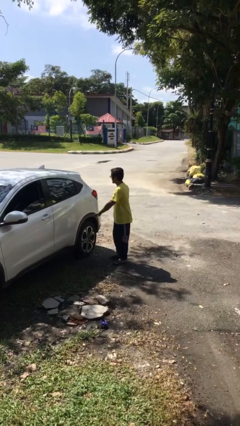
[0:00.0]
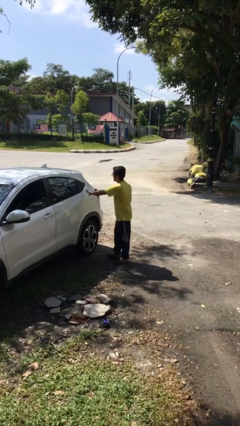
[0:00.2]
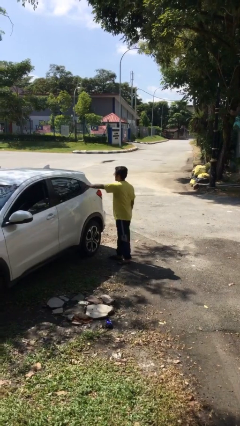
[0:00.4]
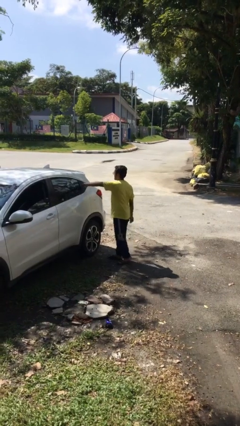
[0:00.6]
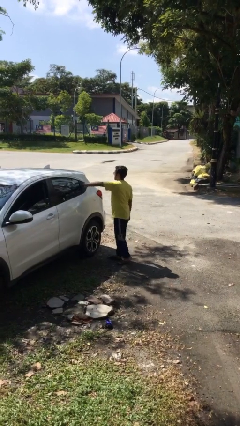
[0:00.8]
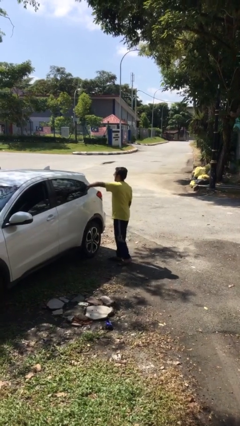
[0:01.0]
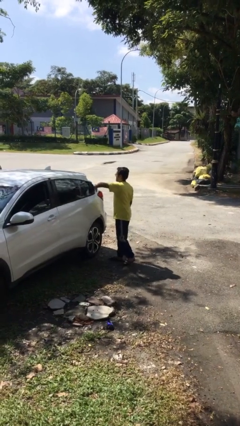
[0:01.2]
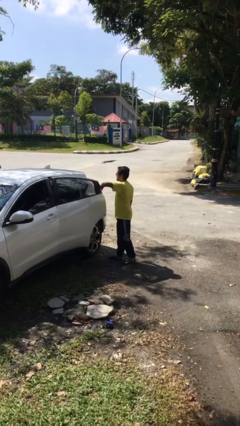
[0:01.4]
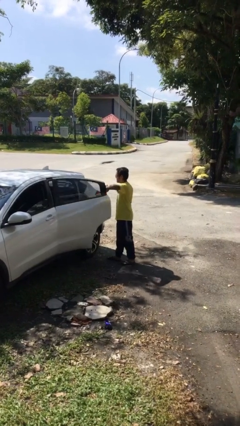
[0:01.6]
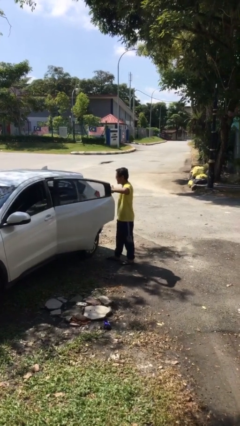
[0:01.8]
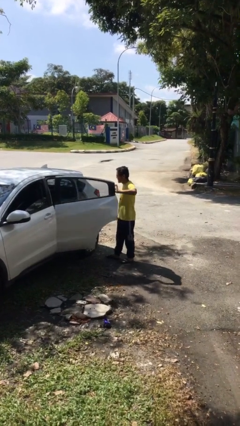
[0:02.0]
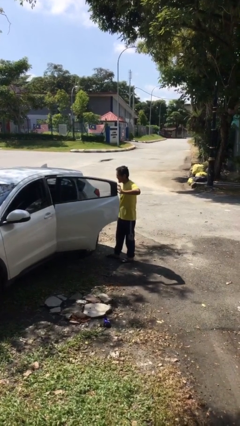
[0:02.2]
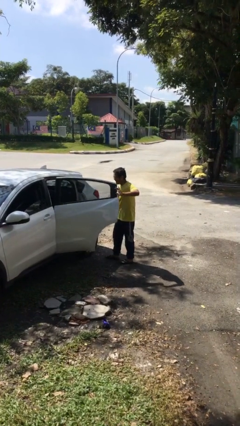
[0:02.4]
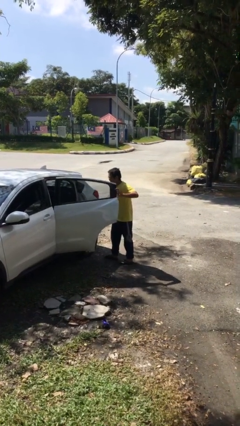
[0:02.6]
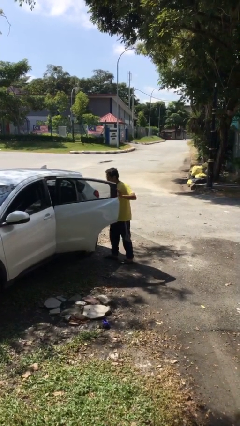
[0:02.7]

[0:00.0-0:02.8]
person opens car door

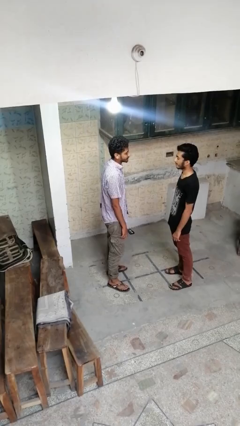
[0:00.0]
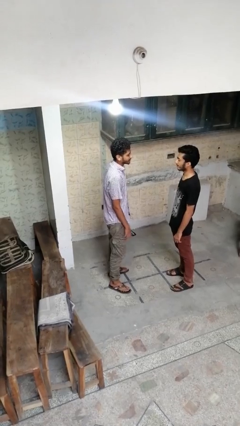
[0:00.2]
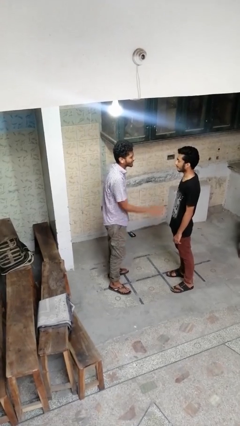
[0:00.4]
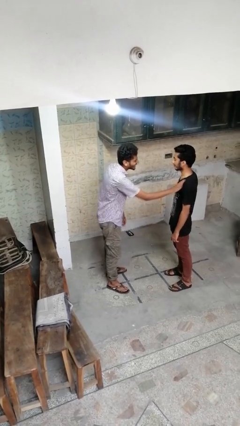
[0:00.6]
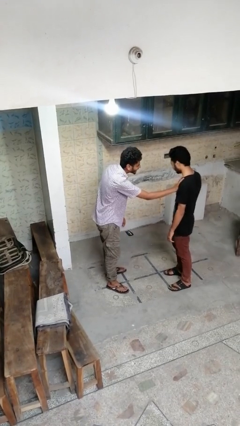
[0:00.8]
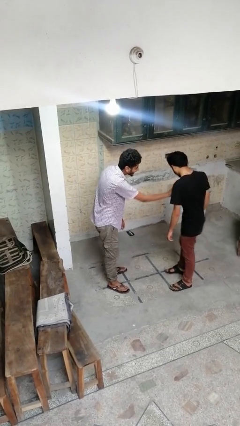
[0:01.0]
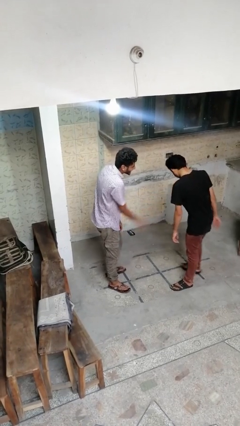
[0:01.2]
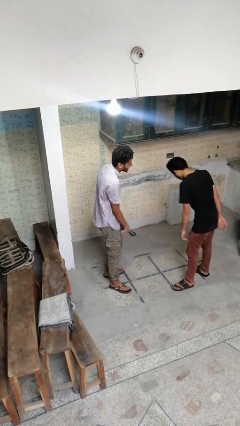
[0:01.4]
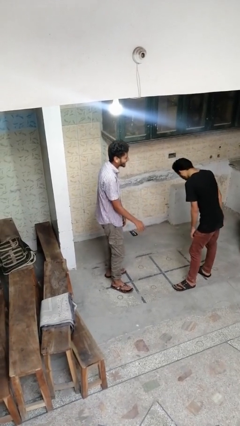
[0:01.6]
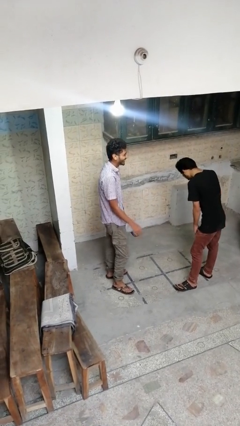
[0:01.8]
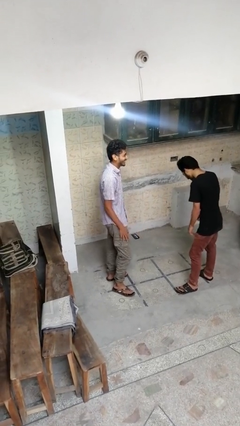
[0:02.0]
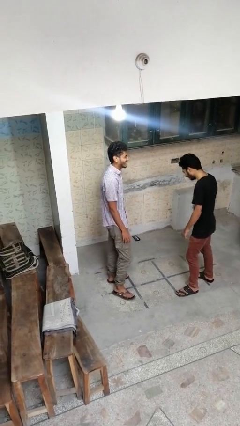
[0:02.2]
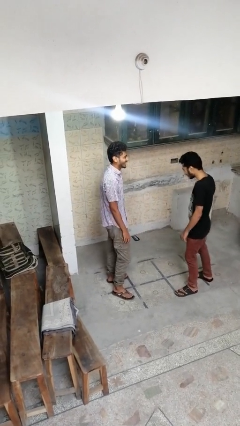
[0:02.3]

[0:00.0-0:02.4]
person shoves person

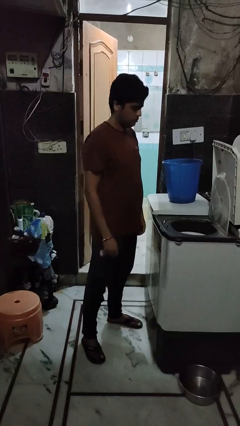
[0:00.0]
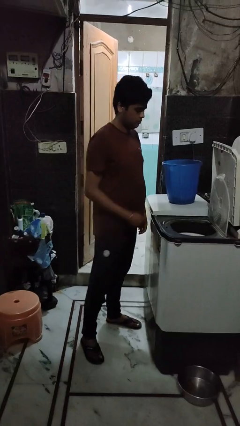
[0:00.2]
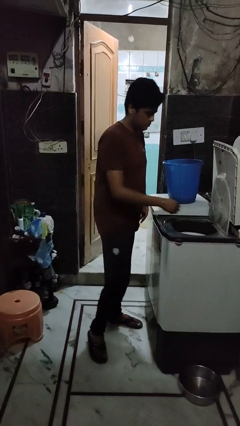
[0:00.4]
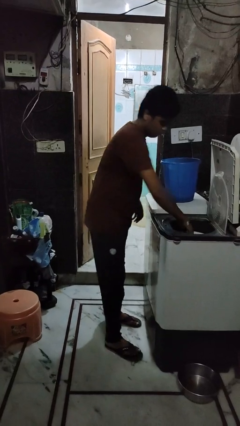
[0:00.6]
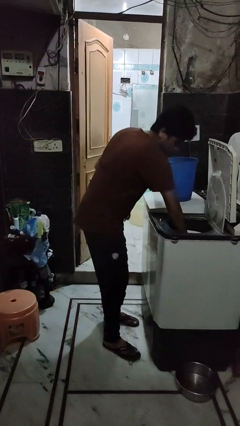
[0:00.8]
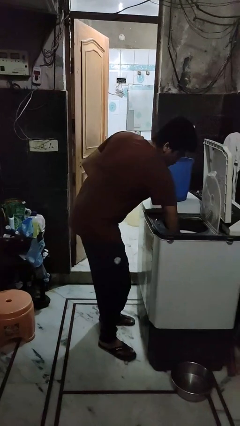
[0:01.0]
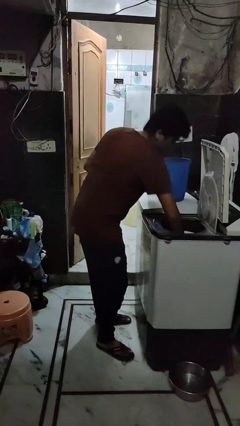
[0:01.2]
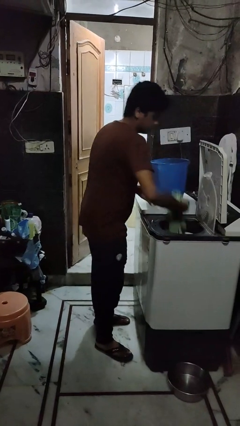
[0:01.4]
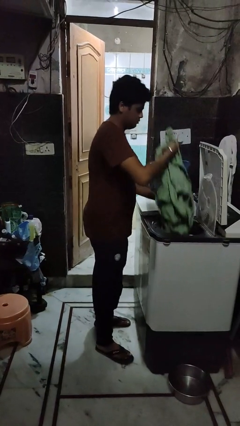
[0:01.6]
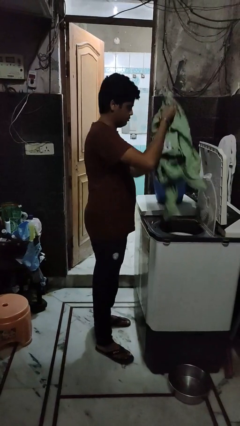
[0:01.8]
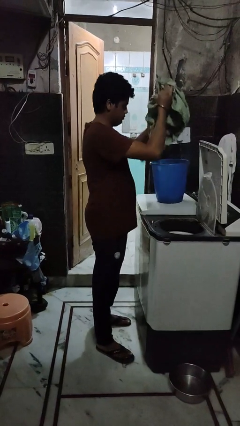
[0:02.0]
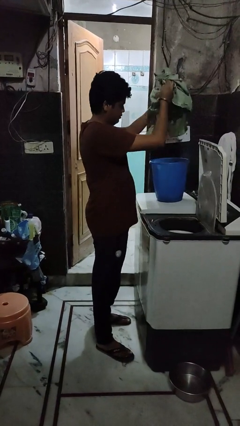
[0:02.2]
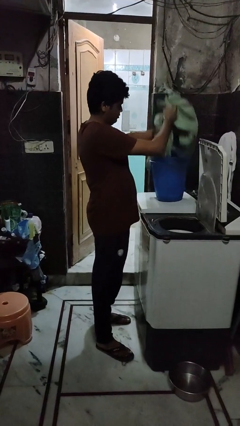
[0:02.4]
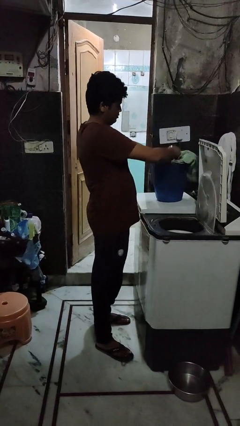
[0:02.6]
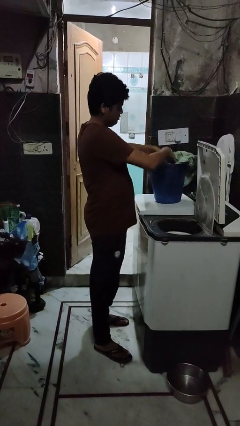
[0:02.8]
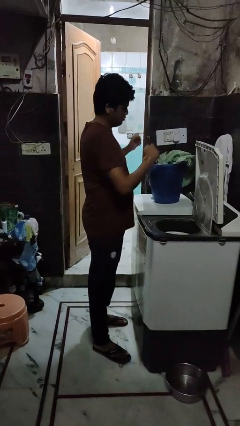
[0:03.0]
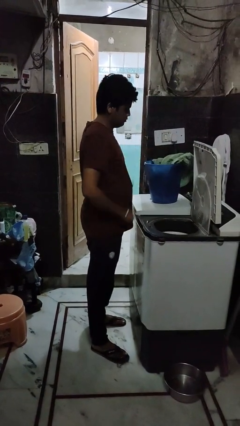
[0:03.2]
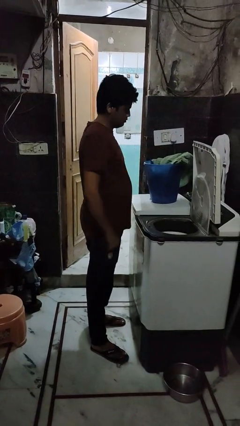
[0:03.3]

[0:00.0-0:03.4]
person unloads dryer

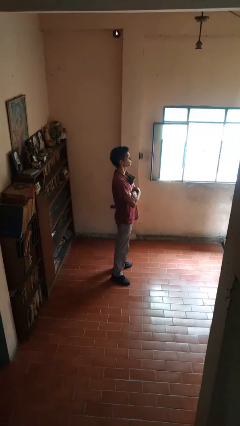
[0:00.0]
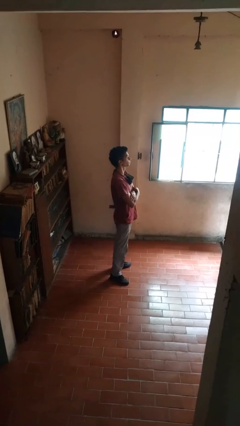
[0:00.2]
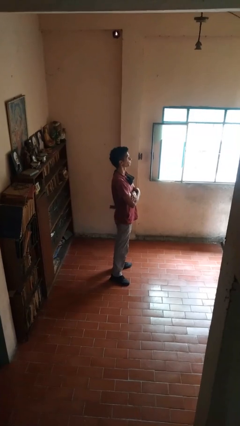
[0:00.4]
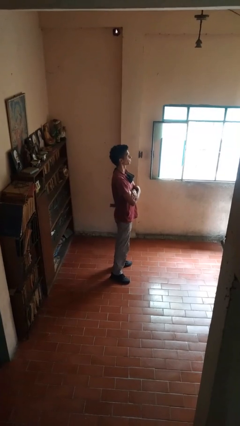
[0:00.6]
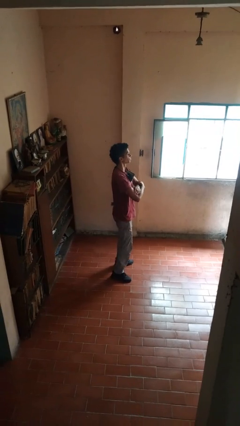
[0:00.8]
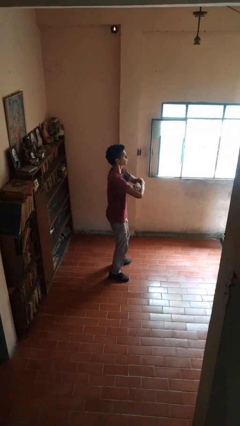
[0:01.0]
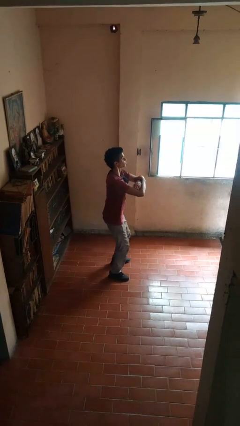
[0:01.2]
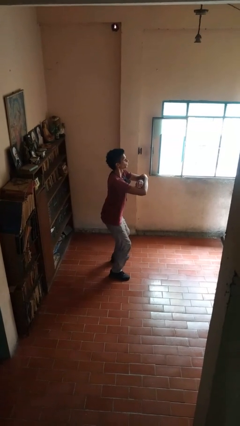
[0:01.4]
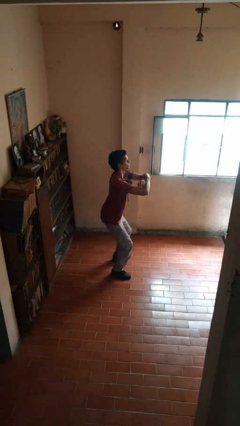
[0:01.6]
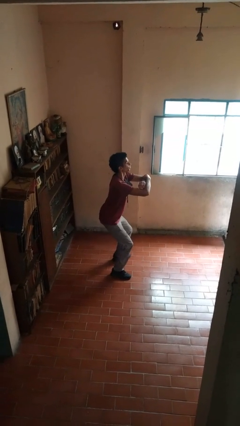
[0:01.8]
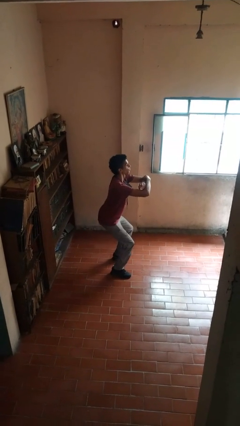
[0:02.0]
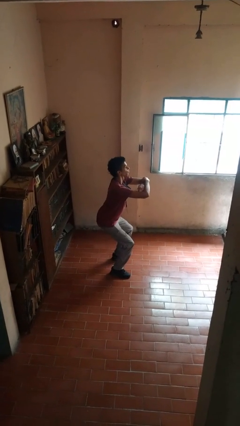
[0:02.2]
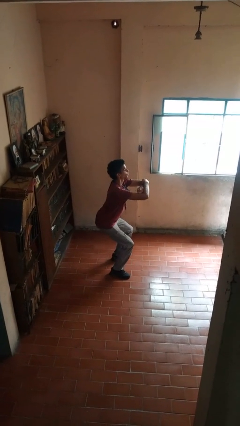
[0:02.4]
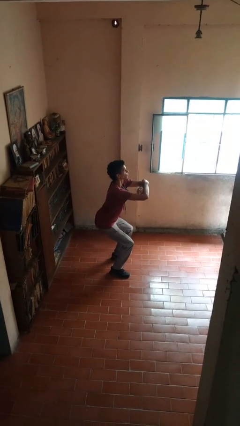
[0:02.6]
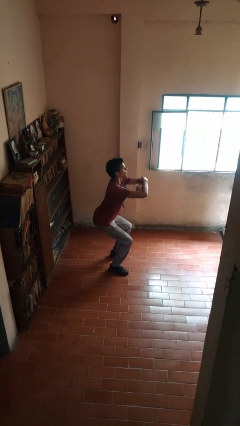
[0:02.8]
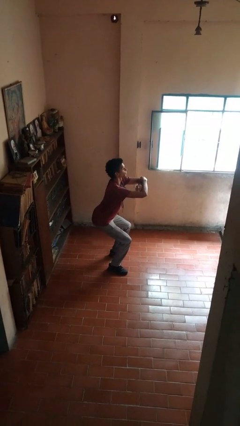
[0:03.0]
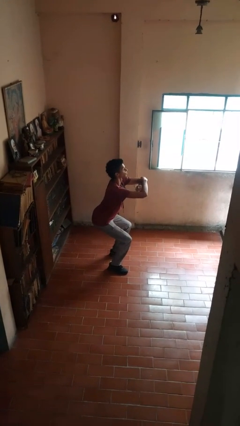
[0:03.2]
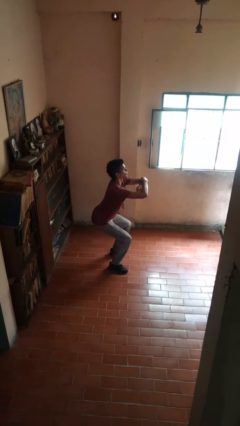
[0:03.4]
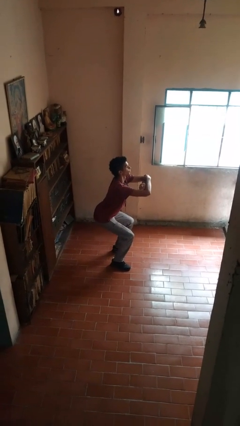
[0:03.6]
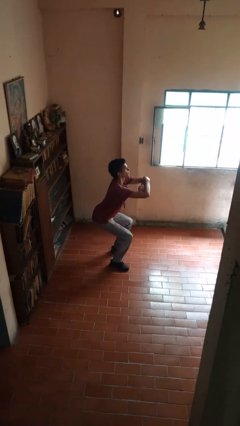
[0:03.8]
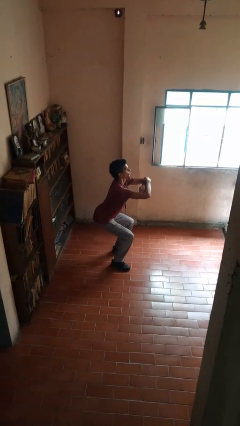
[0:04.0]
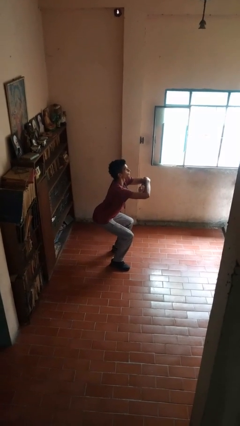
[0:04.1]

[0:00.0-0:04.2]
person squats

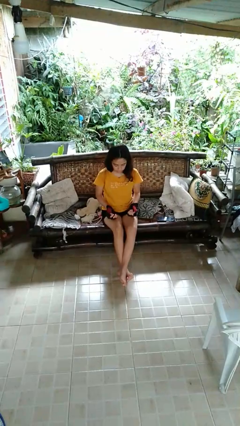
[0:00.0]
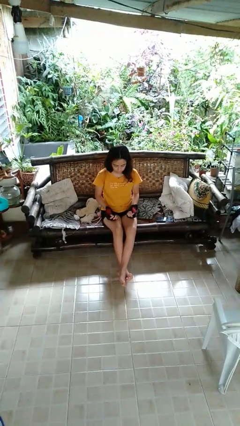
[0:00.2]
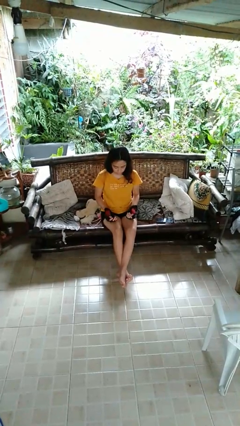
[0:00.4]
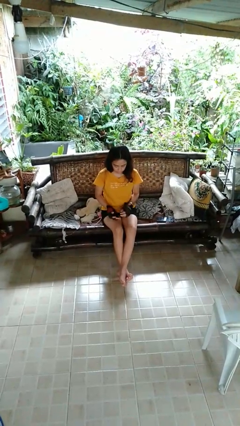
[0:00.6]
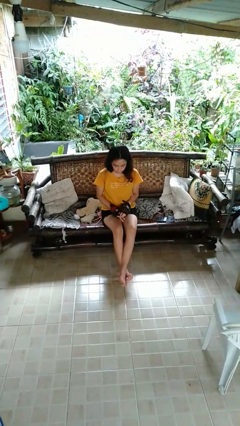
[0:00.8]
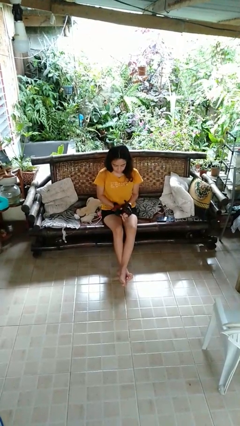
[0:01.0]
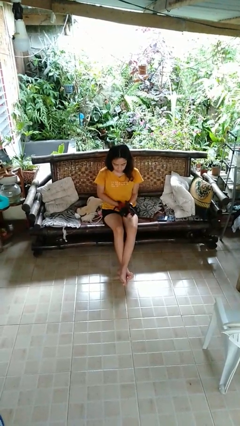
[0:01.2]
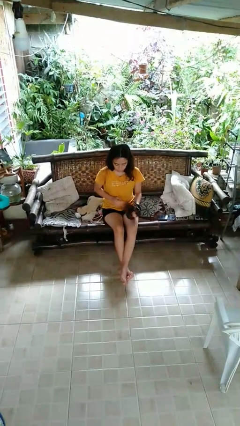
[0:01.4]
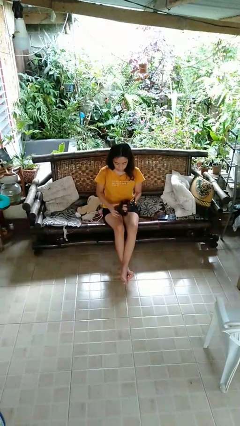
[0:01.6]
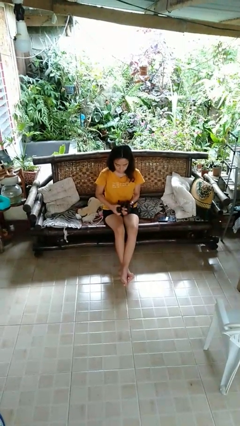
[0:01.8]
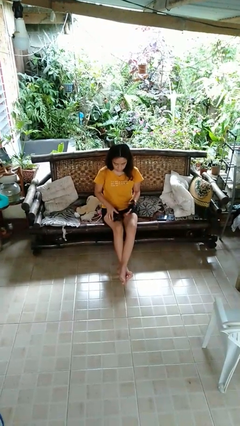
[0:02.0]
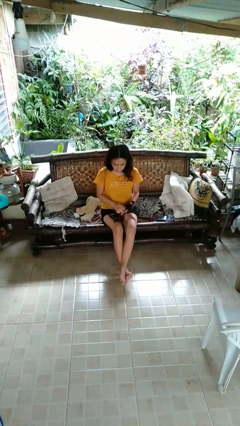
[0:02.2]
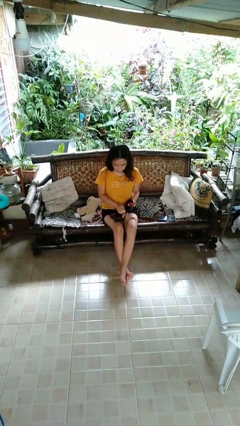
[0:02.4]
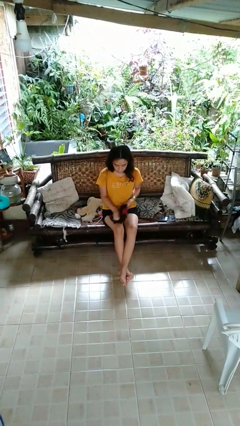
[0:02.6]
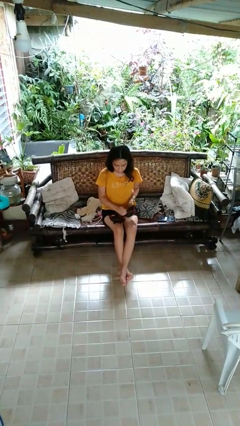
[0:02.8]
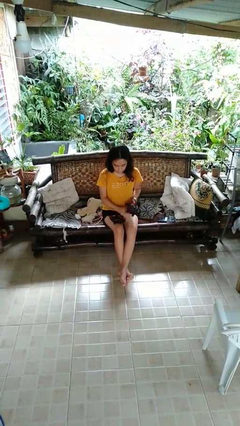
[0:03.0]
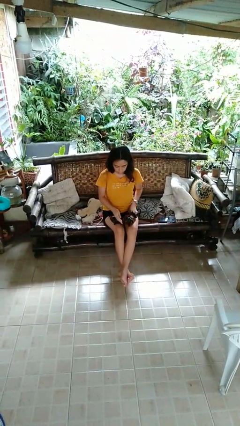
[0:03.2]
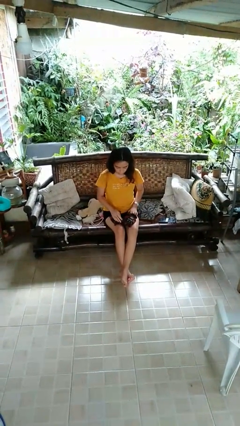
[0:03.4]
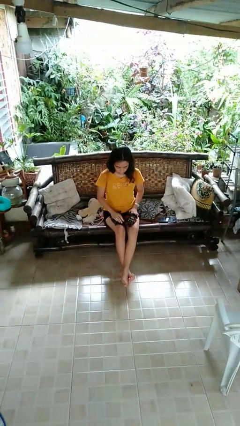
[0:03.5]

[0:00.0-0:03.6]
person takes off gloves

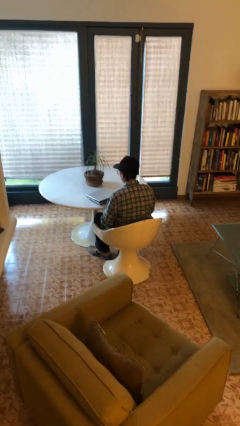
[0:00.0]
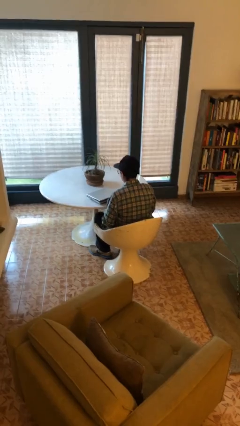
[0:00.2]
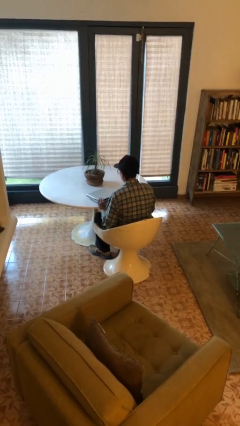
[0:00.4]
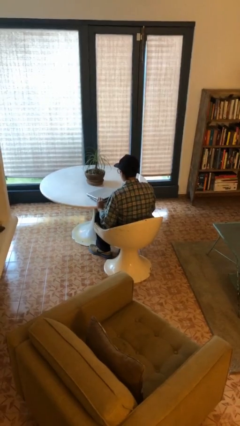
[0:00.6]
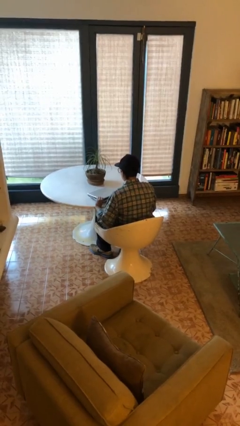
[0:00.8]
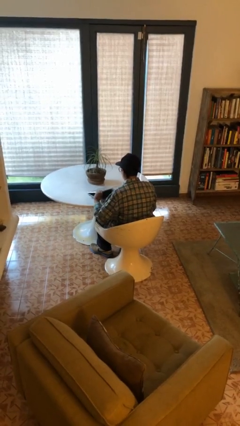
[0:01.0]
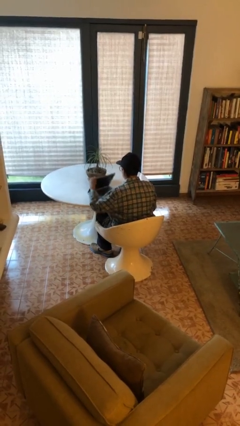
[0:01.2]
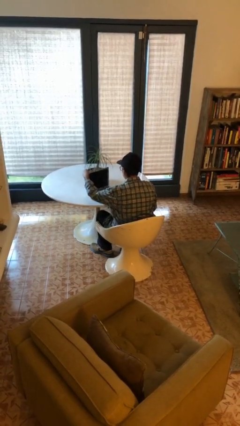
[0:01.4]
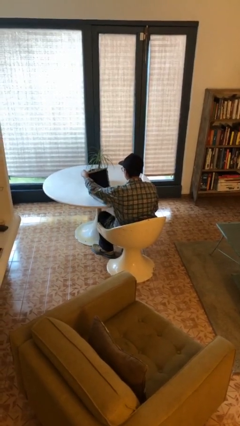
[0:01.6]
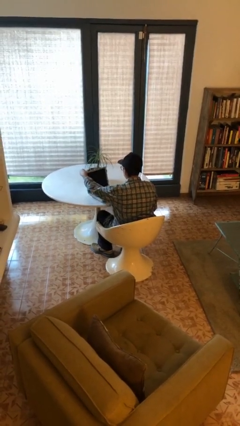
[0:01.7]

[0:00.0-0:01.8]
person opens laptop
